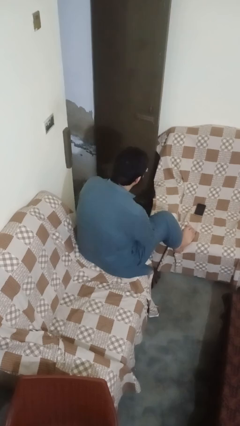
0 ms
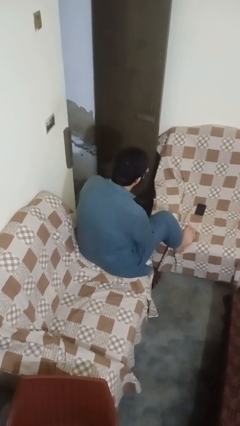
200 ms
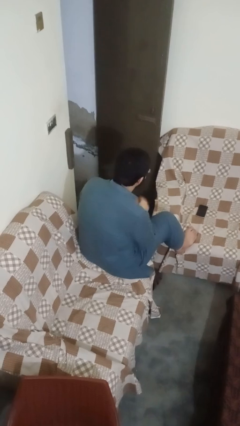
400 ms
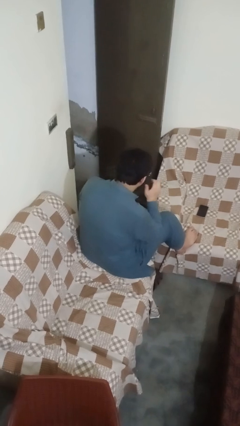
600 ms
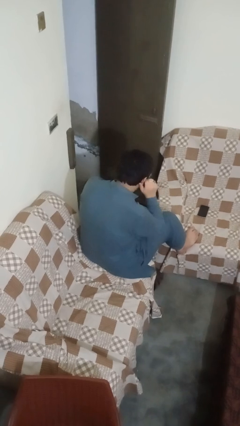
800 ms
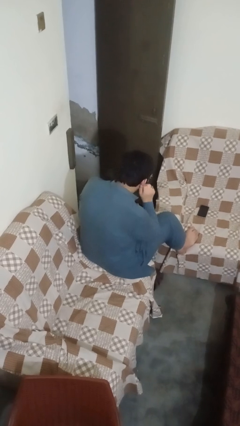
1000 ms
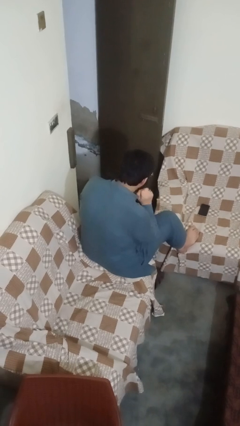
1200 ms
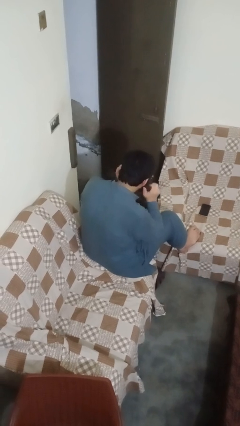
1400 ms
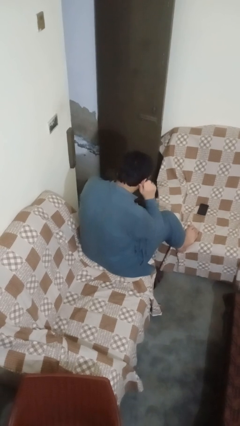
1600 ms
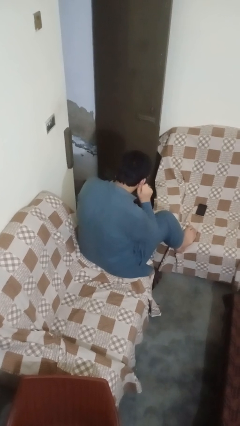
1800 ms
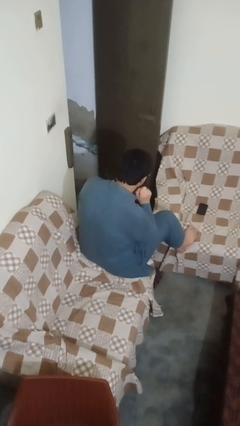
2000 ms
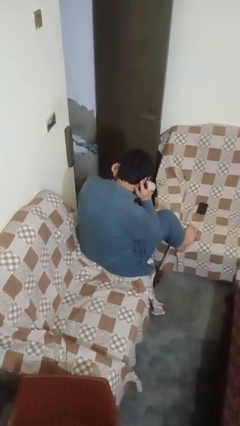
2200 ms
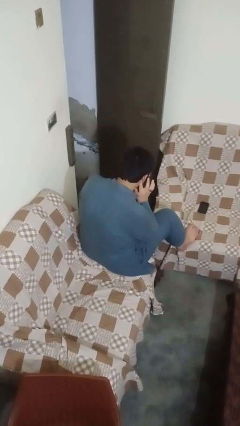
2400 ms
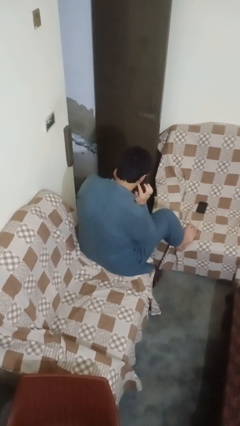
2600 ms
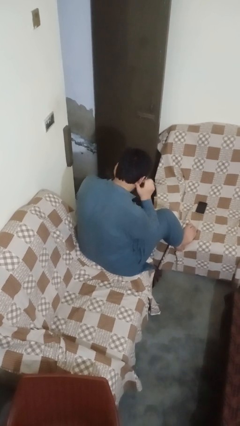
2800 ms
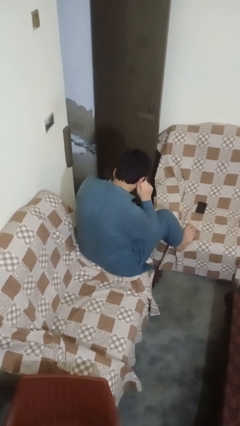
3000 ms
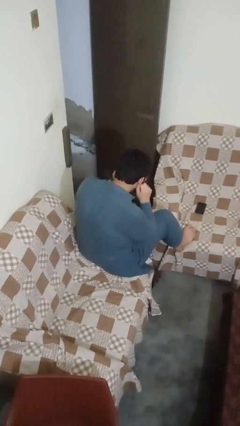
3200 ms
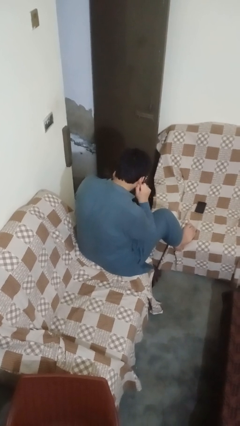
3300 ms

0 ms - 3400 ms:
person touches earlobe

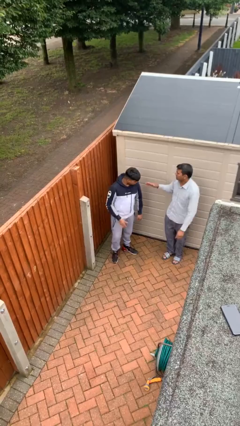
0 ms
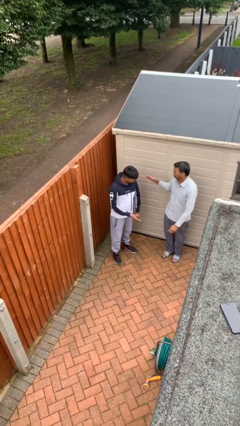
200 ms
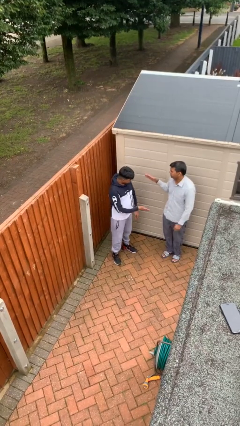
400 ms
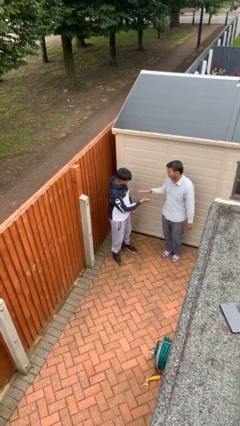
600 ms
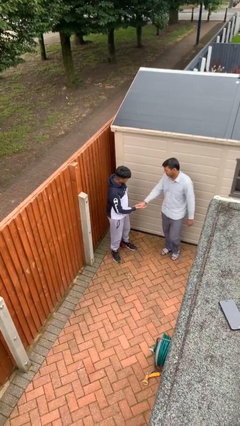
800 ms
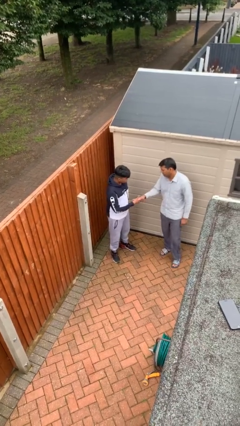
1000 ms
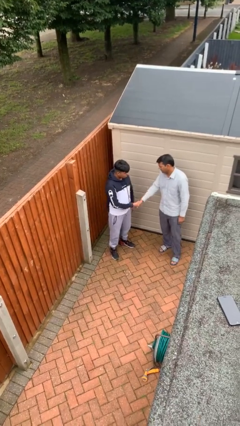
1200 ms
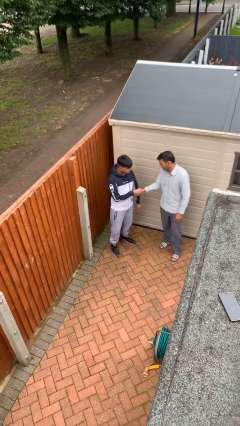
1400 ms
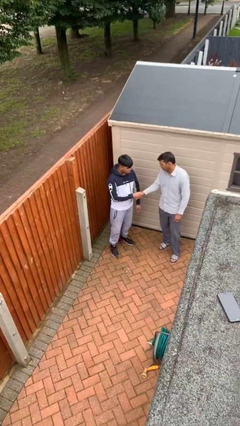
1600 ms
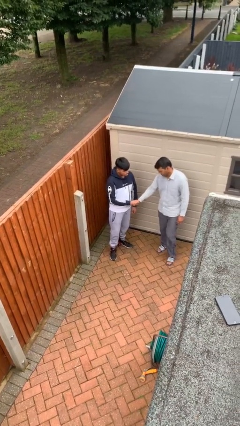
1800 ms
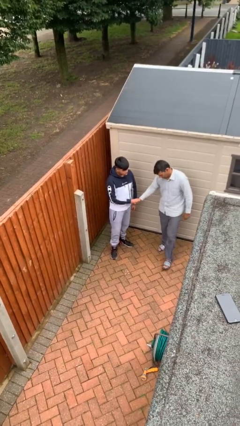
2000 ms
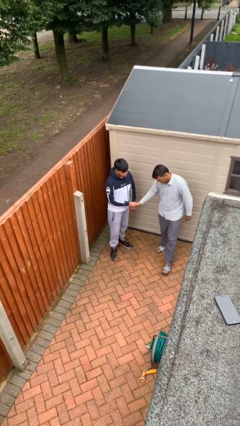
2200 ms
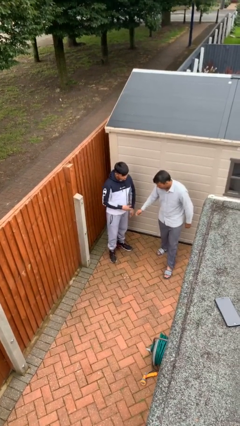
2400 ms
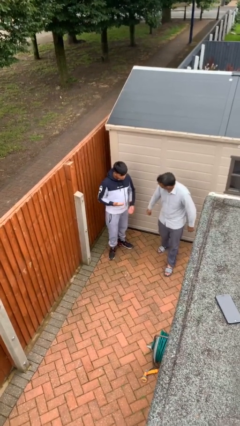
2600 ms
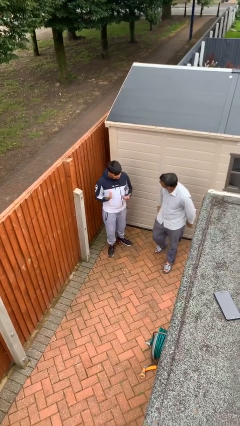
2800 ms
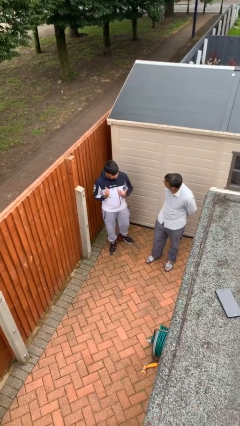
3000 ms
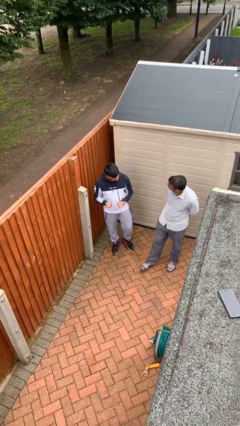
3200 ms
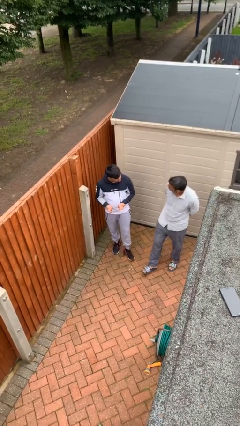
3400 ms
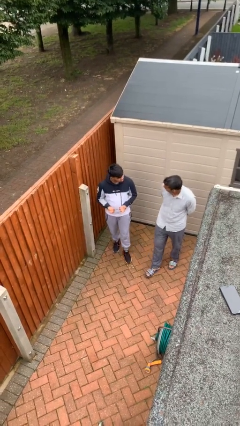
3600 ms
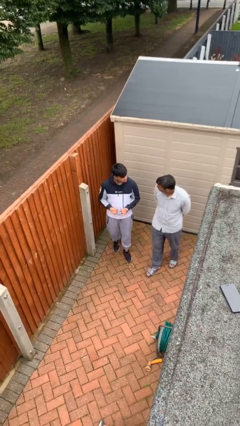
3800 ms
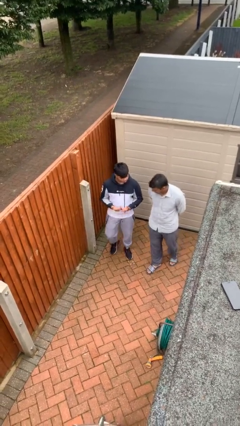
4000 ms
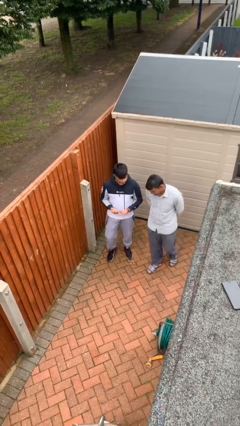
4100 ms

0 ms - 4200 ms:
person shakes hand

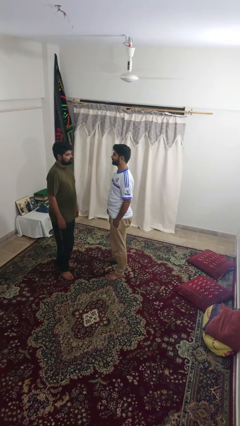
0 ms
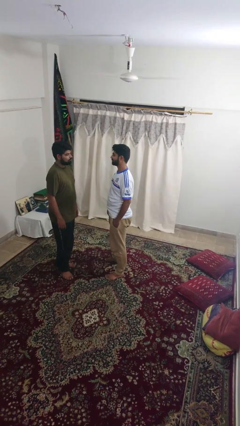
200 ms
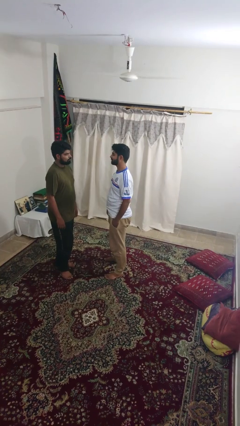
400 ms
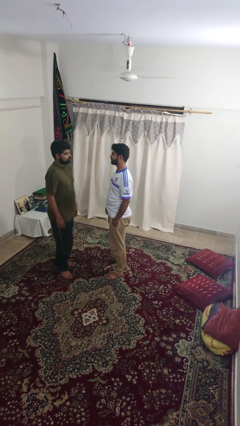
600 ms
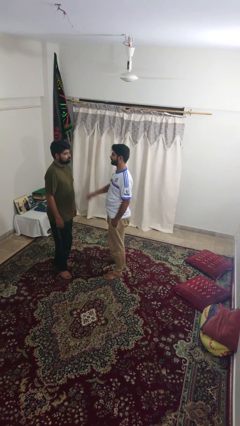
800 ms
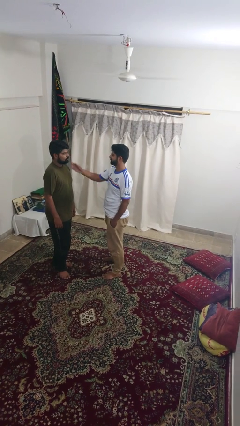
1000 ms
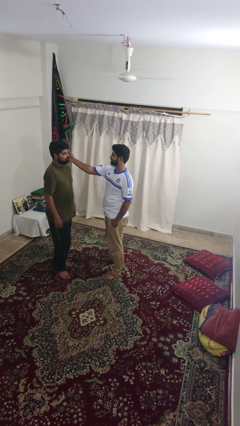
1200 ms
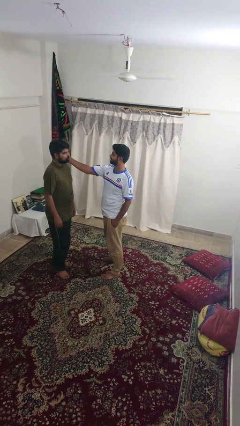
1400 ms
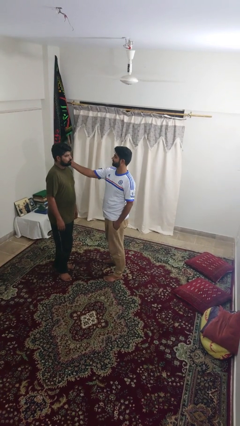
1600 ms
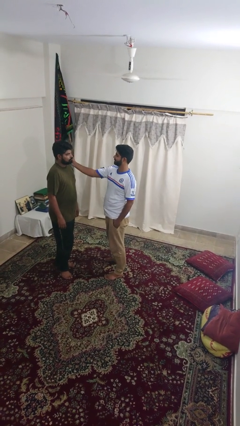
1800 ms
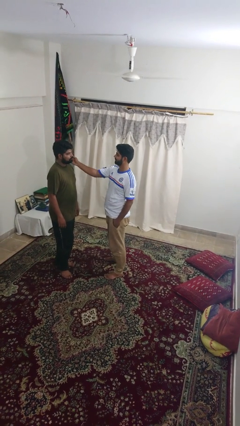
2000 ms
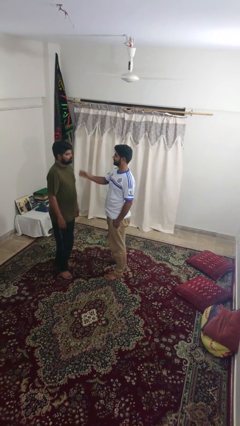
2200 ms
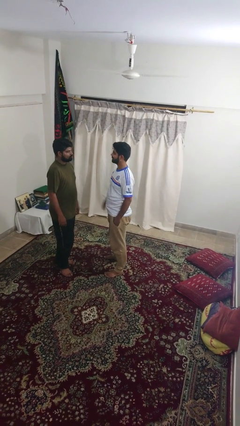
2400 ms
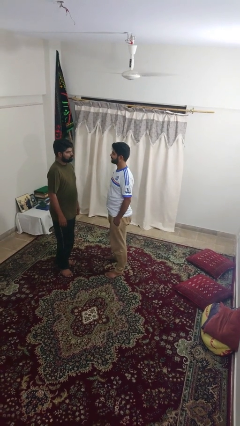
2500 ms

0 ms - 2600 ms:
person touches face of person

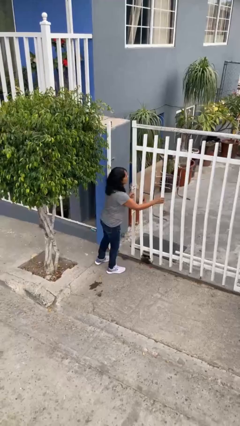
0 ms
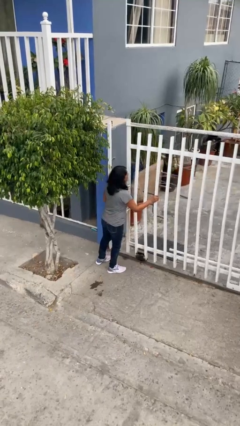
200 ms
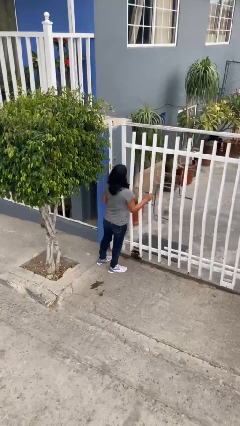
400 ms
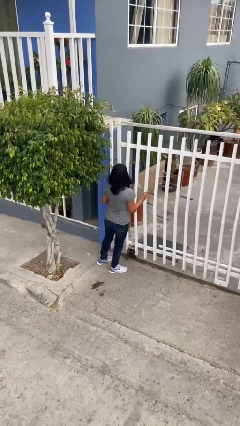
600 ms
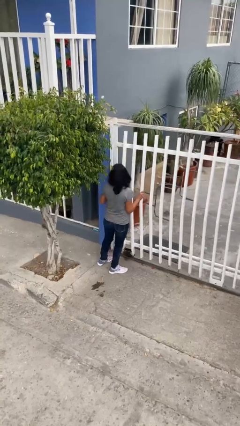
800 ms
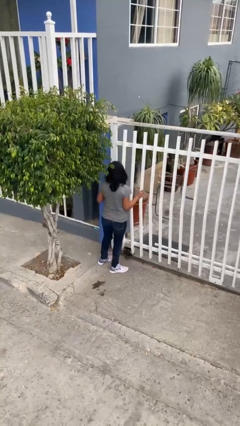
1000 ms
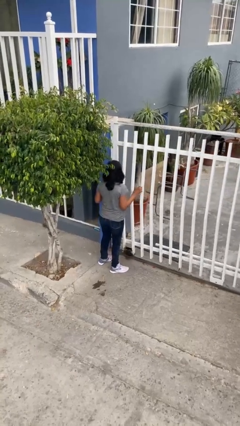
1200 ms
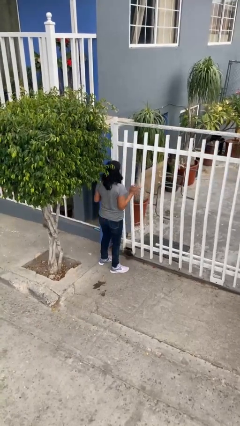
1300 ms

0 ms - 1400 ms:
person closes facility door

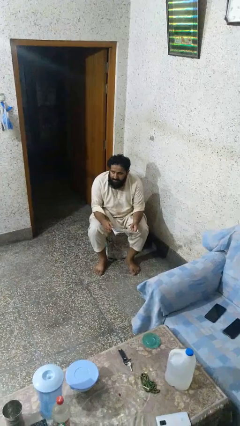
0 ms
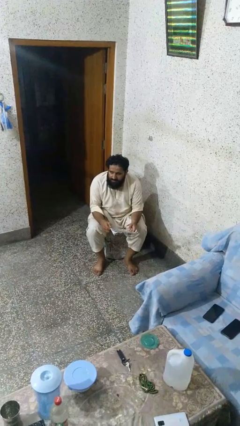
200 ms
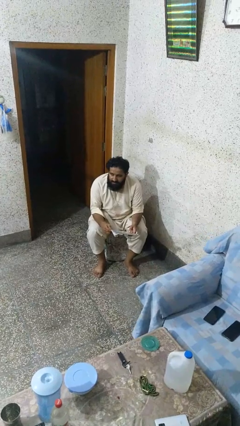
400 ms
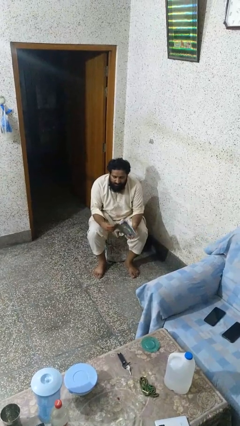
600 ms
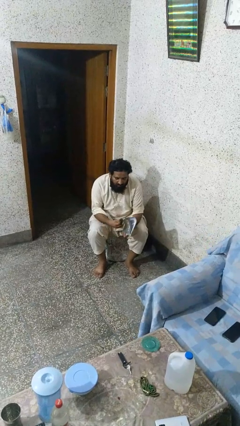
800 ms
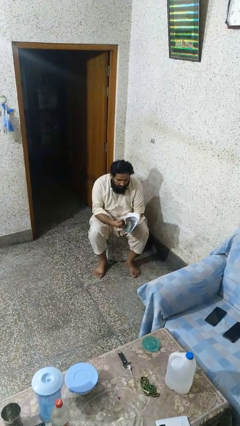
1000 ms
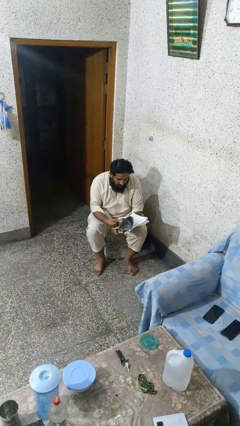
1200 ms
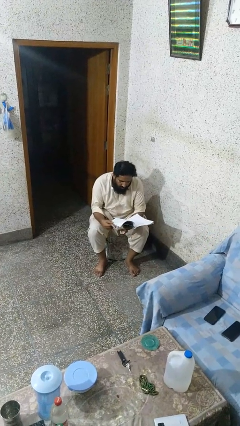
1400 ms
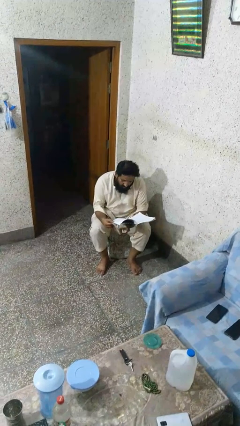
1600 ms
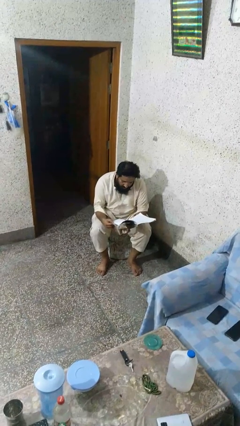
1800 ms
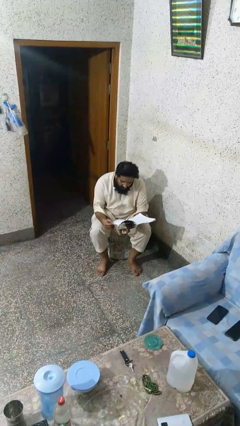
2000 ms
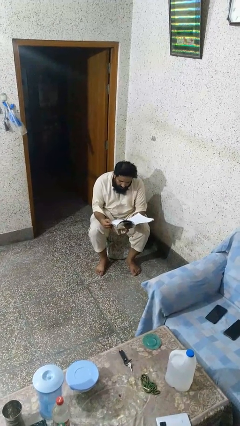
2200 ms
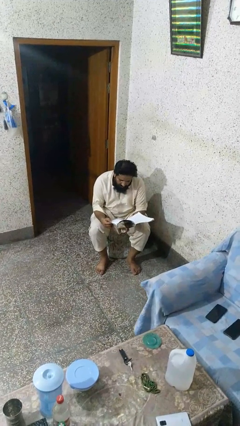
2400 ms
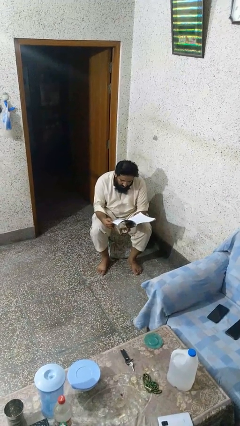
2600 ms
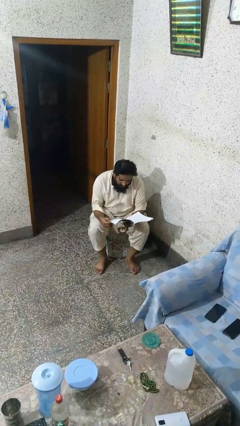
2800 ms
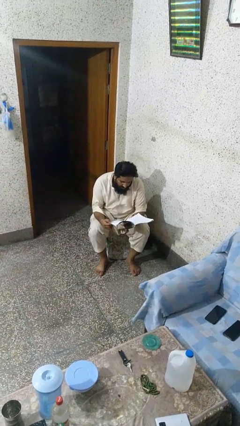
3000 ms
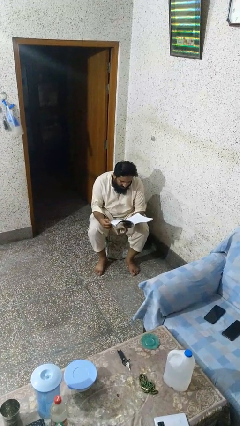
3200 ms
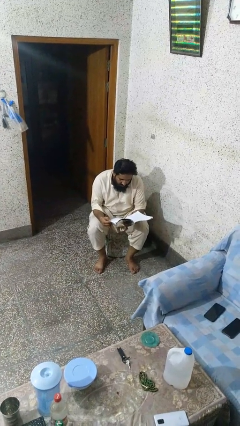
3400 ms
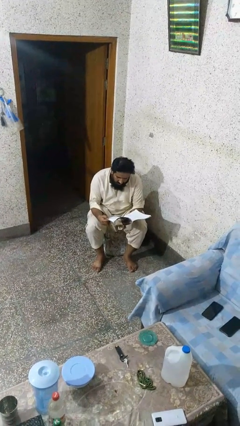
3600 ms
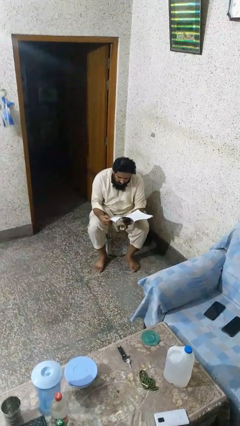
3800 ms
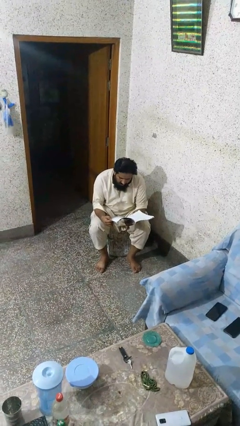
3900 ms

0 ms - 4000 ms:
person reads magazine

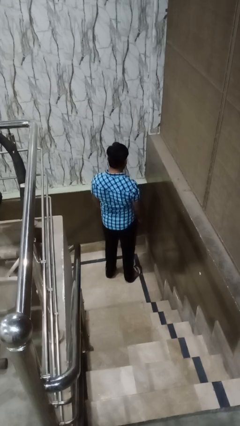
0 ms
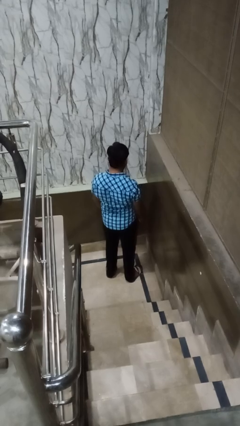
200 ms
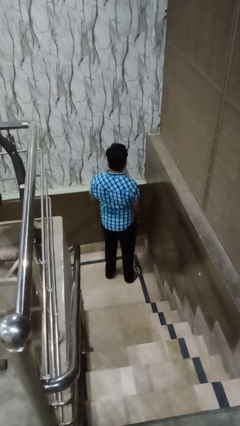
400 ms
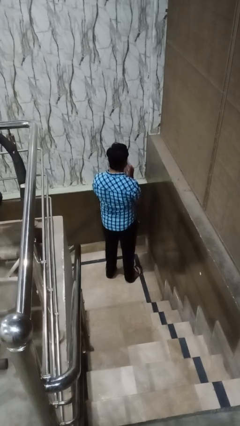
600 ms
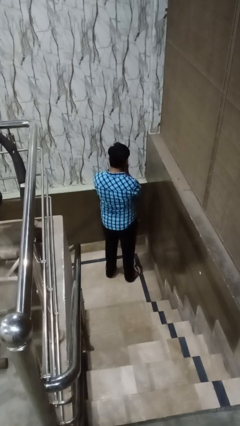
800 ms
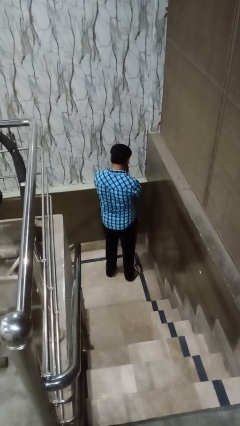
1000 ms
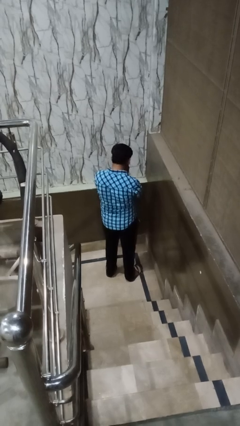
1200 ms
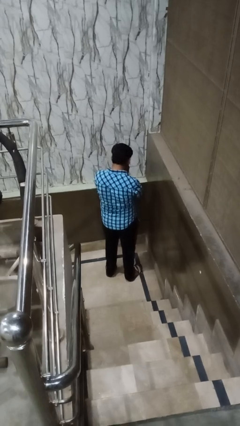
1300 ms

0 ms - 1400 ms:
person sneezes into hand

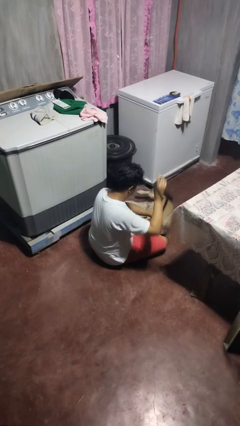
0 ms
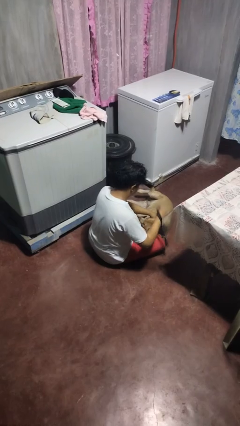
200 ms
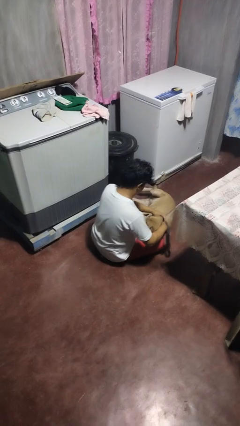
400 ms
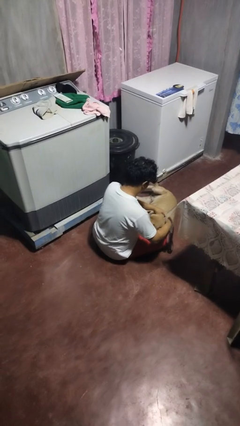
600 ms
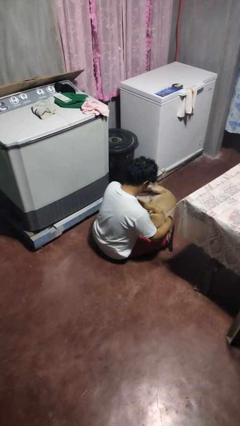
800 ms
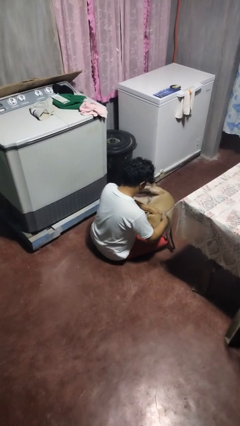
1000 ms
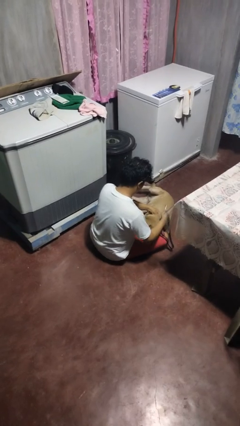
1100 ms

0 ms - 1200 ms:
person unattaches leash from dog
